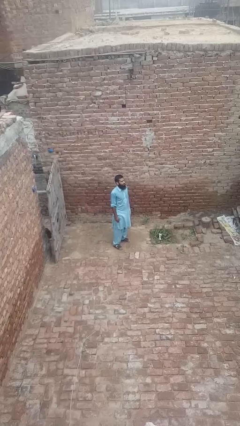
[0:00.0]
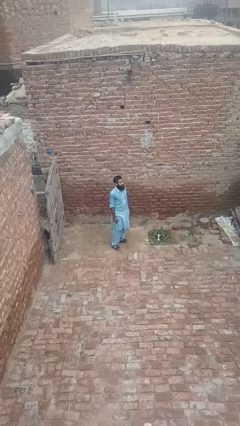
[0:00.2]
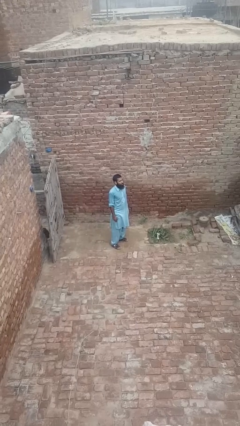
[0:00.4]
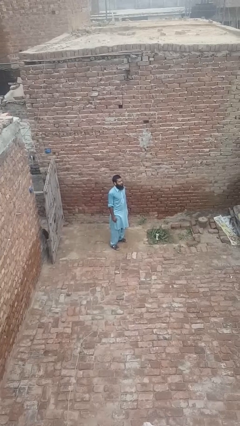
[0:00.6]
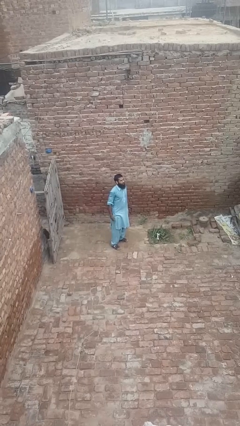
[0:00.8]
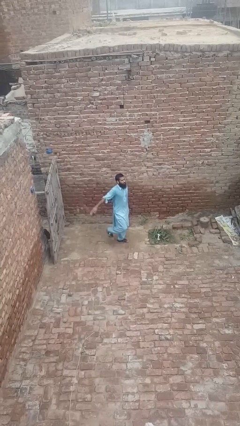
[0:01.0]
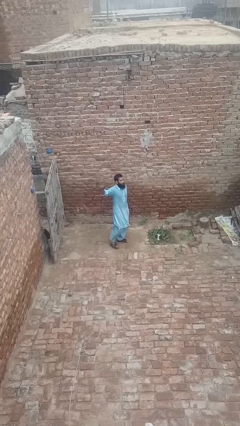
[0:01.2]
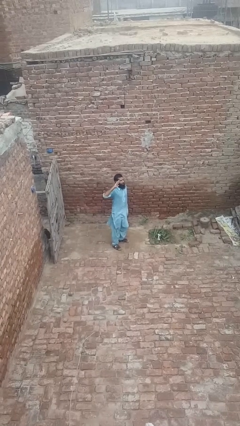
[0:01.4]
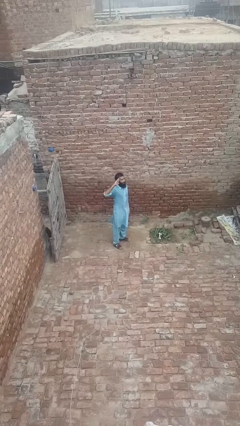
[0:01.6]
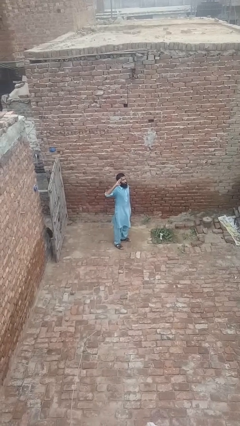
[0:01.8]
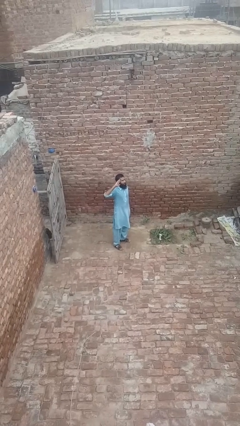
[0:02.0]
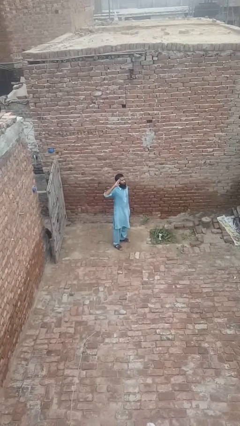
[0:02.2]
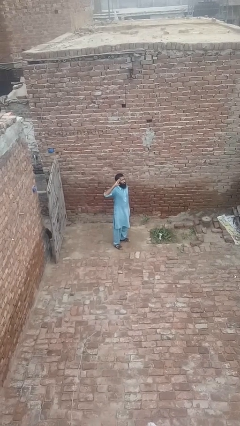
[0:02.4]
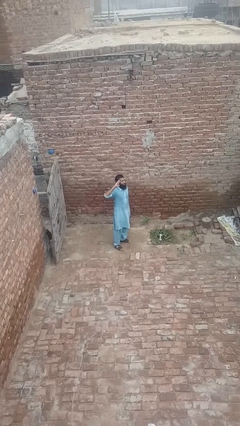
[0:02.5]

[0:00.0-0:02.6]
person salutes

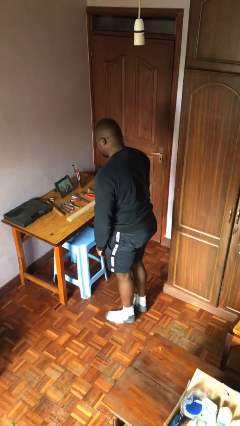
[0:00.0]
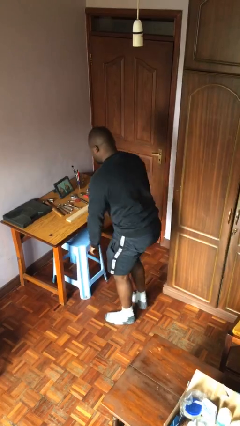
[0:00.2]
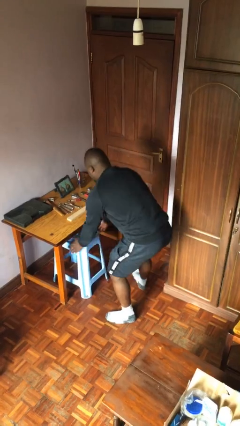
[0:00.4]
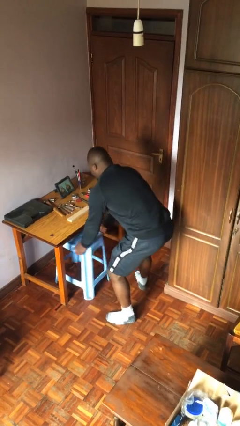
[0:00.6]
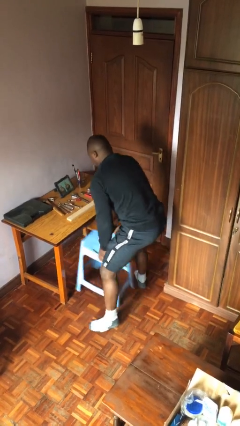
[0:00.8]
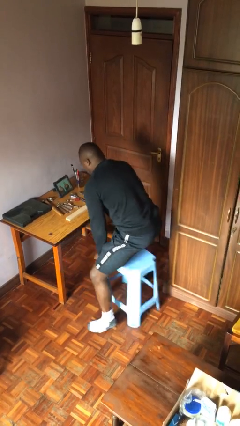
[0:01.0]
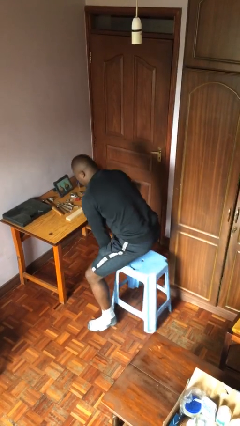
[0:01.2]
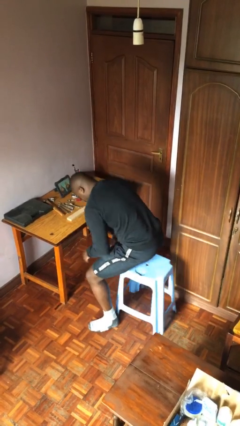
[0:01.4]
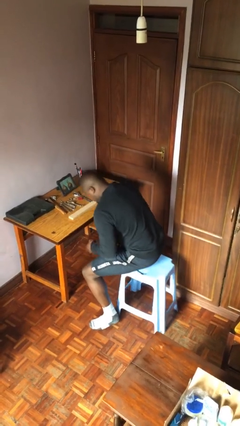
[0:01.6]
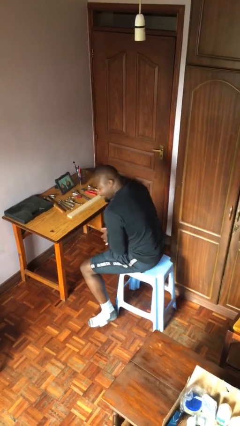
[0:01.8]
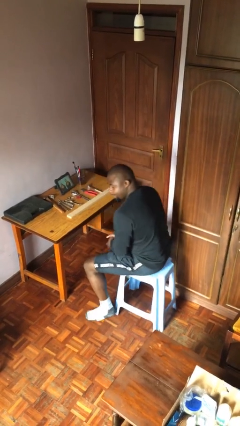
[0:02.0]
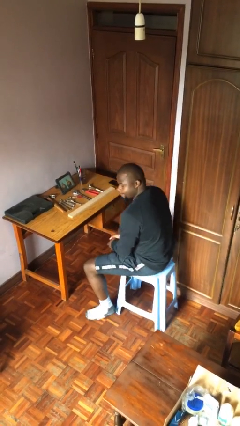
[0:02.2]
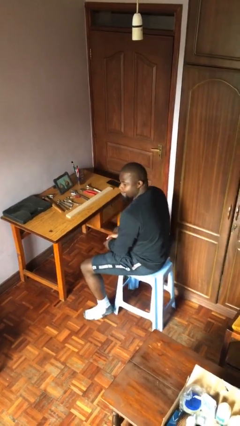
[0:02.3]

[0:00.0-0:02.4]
person sits down

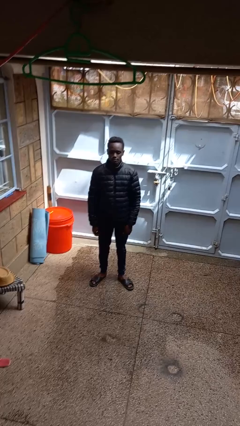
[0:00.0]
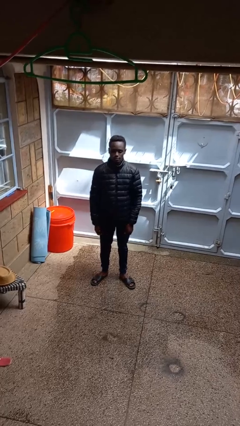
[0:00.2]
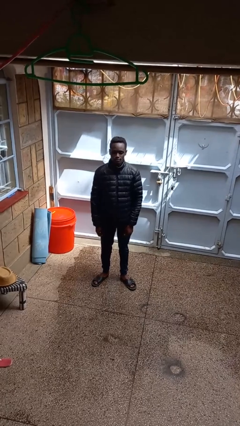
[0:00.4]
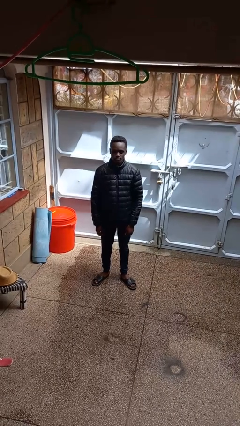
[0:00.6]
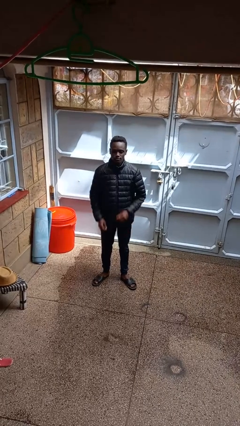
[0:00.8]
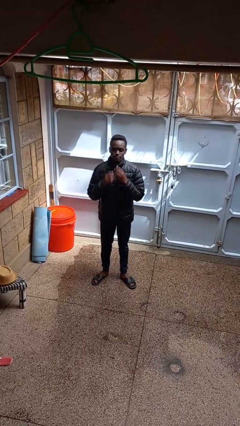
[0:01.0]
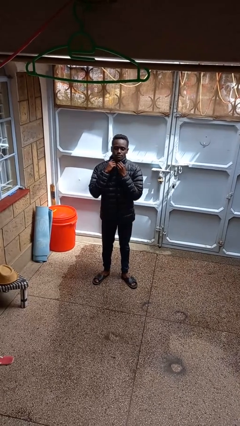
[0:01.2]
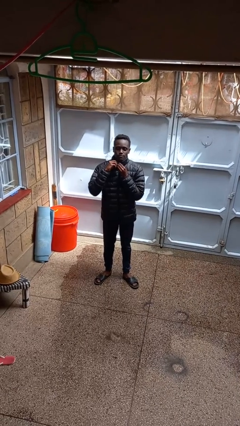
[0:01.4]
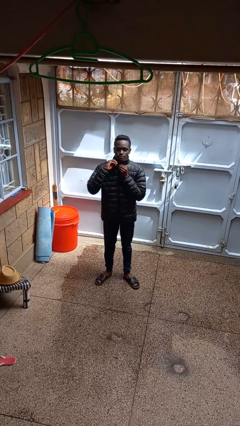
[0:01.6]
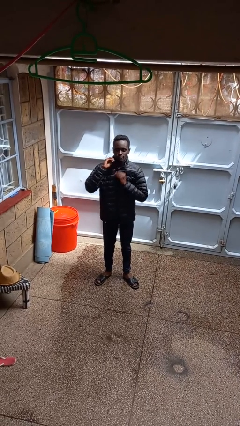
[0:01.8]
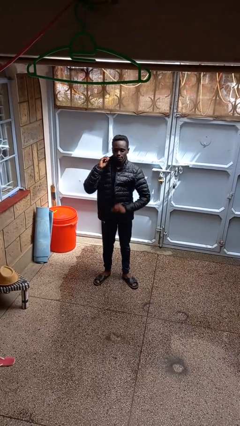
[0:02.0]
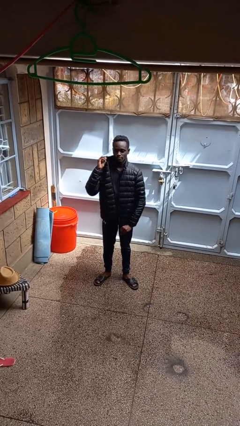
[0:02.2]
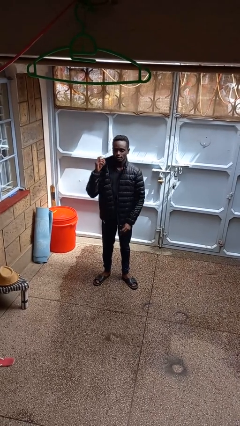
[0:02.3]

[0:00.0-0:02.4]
person unzips jacket

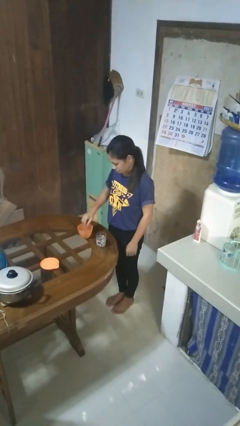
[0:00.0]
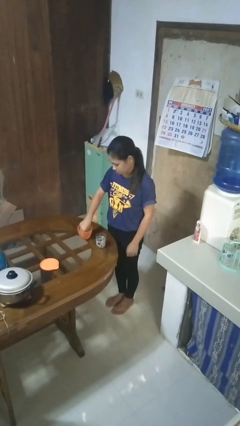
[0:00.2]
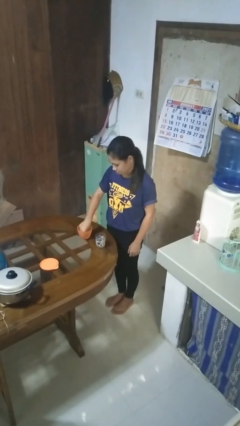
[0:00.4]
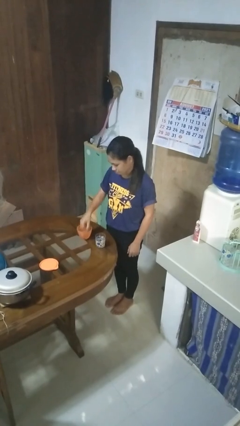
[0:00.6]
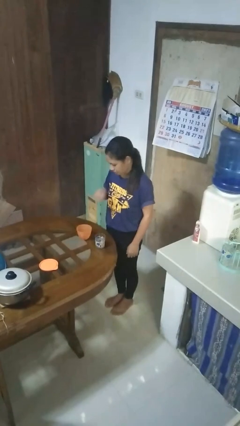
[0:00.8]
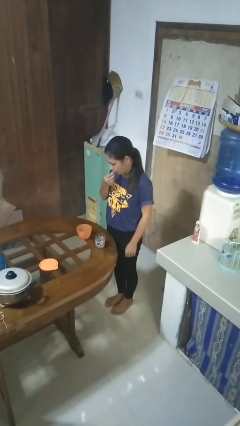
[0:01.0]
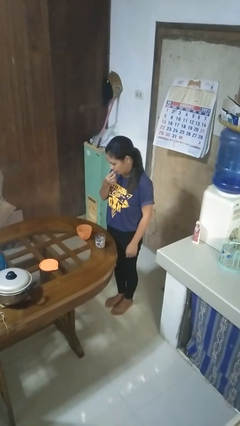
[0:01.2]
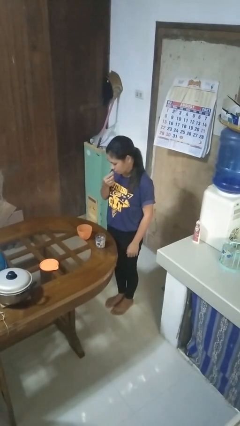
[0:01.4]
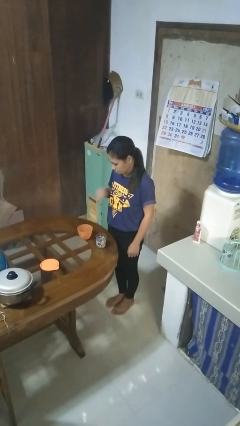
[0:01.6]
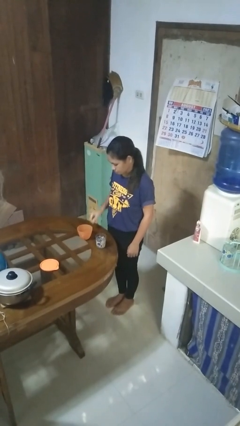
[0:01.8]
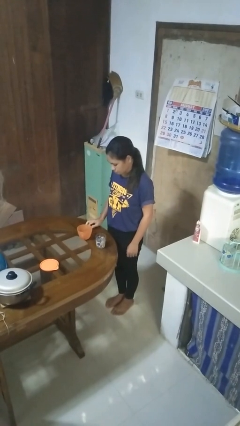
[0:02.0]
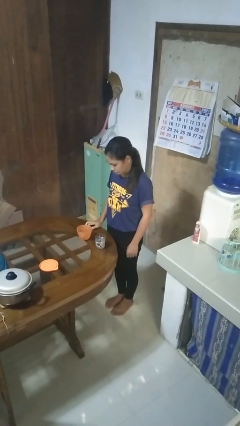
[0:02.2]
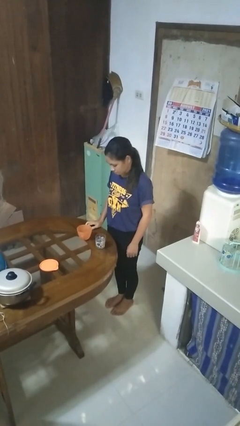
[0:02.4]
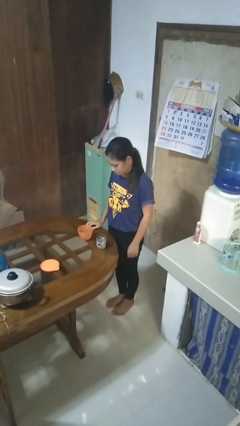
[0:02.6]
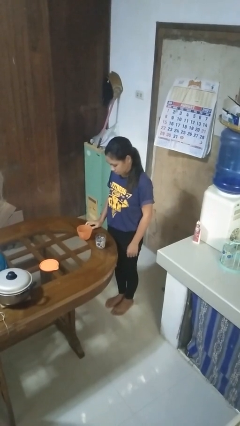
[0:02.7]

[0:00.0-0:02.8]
person takes medicine pills

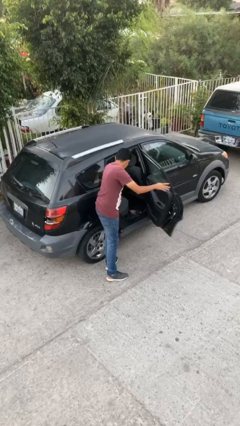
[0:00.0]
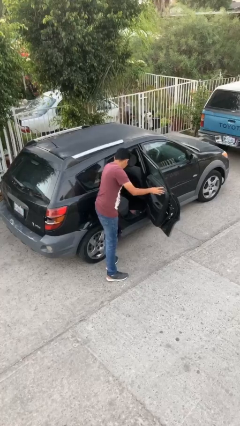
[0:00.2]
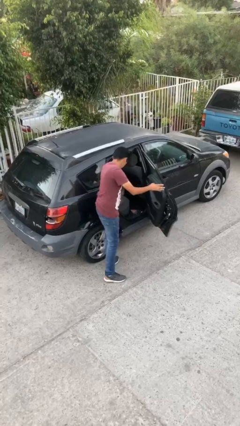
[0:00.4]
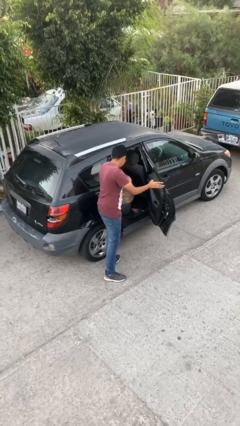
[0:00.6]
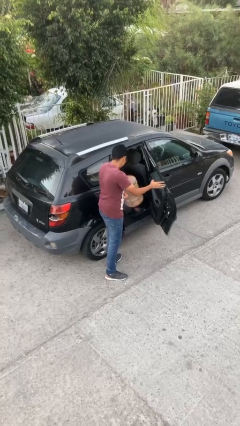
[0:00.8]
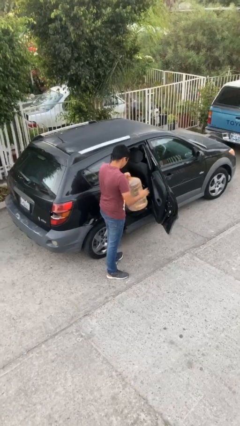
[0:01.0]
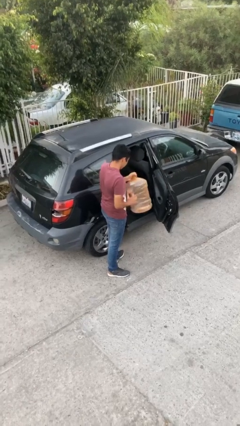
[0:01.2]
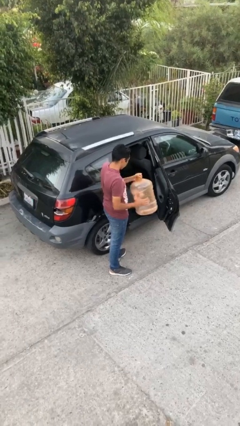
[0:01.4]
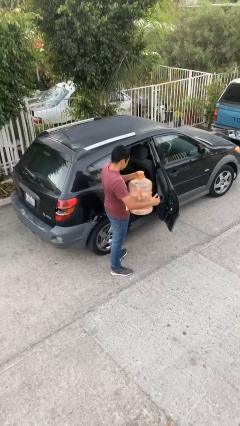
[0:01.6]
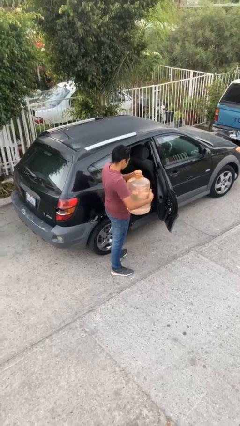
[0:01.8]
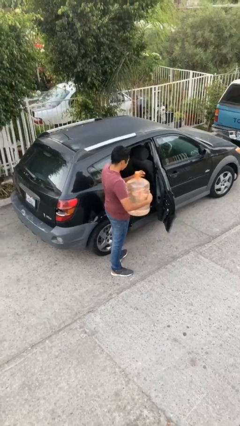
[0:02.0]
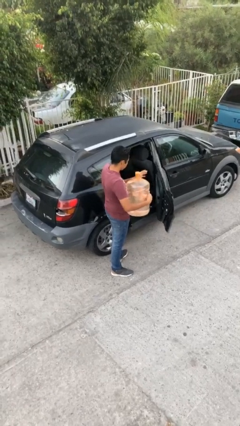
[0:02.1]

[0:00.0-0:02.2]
person unloads car

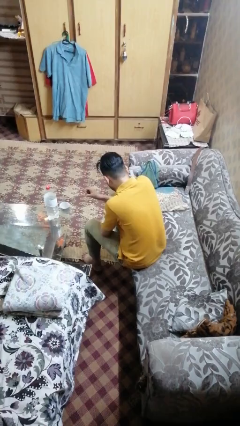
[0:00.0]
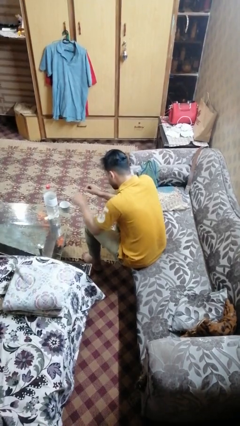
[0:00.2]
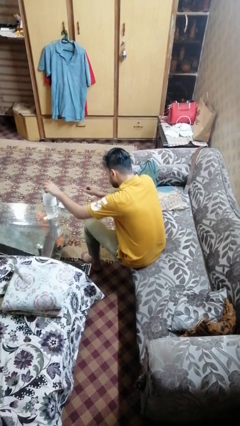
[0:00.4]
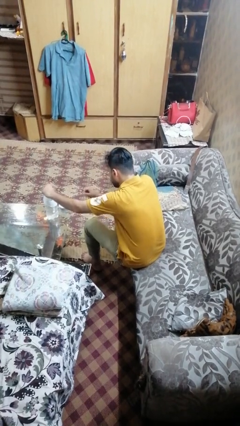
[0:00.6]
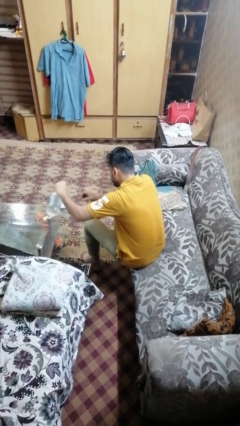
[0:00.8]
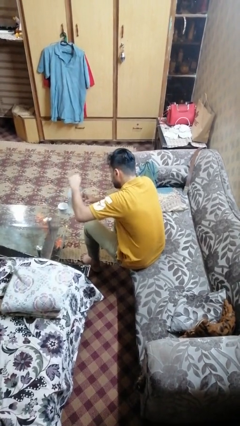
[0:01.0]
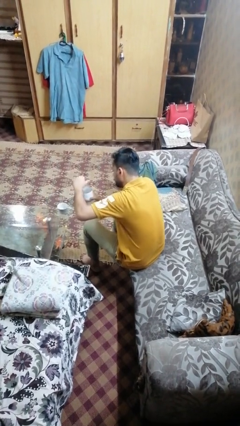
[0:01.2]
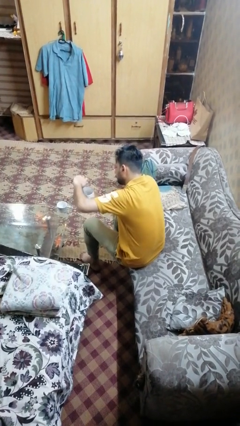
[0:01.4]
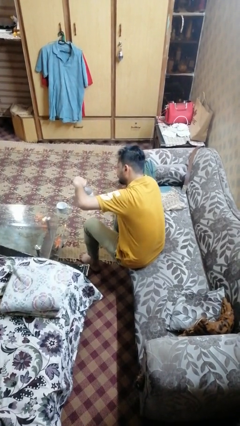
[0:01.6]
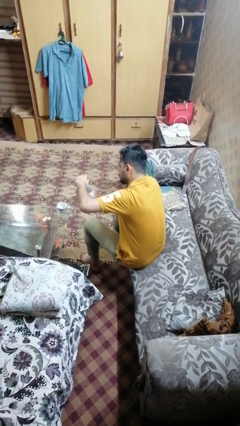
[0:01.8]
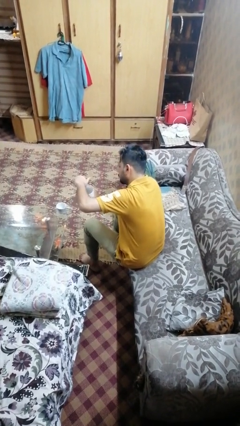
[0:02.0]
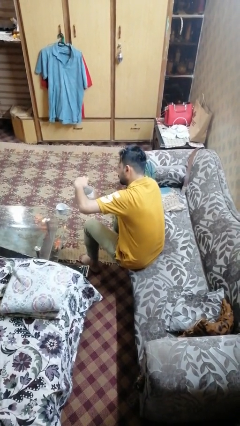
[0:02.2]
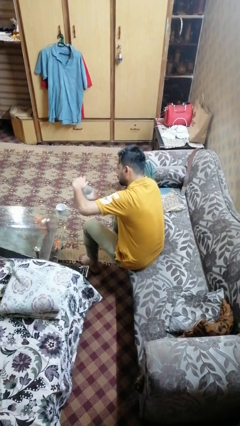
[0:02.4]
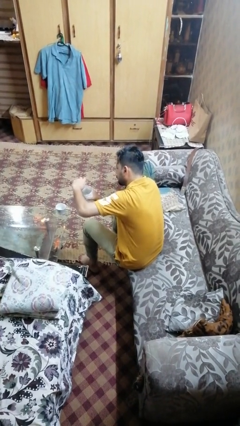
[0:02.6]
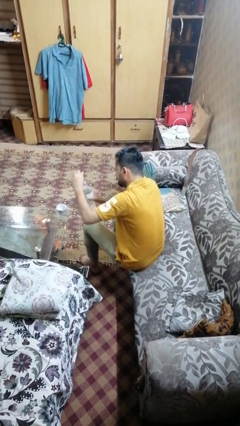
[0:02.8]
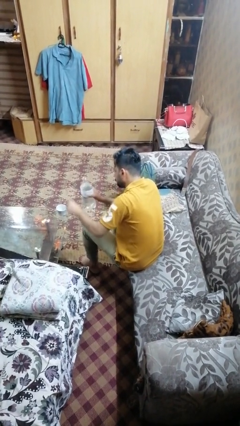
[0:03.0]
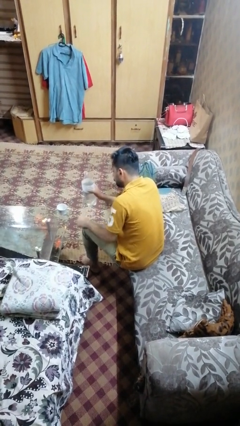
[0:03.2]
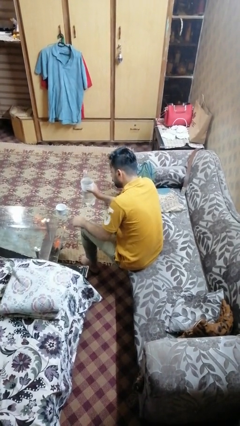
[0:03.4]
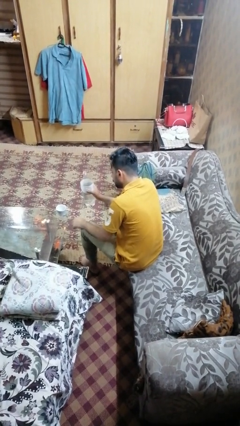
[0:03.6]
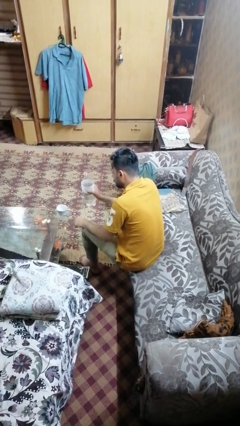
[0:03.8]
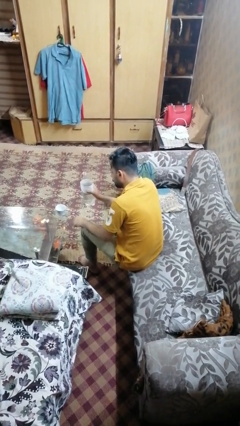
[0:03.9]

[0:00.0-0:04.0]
person unscrews lid from bottle

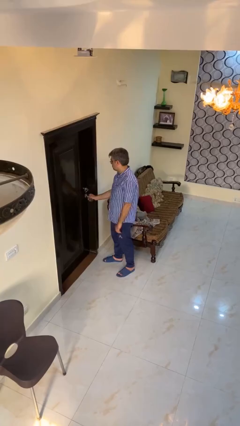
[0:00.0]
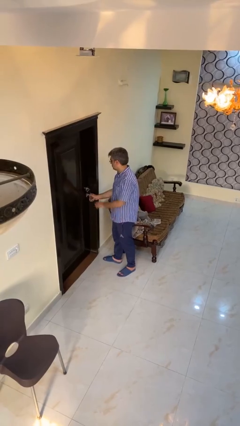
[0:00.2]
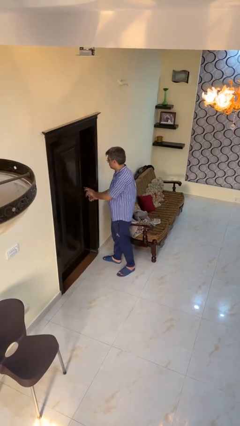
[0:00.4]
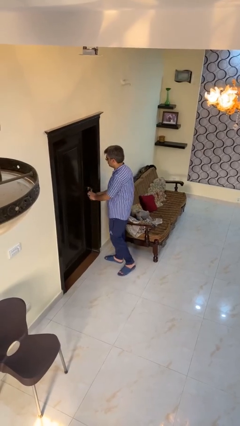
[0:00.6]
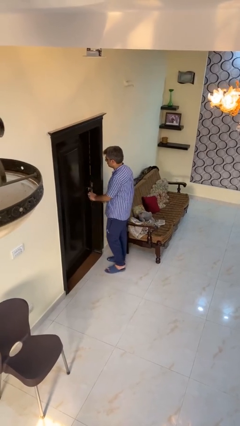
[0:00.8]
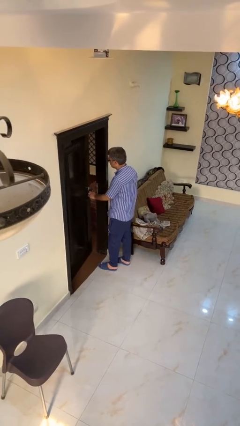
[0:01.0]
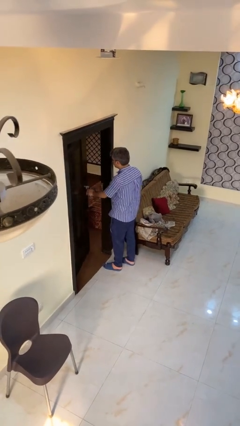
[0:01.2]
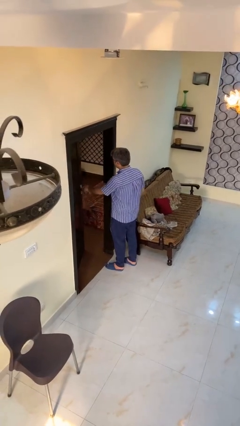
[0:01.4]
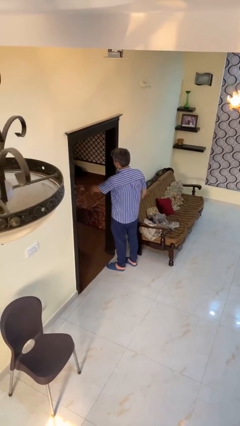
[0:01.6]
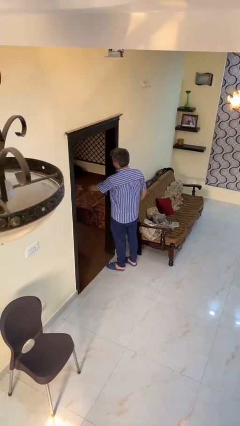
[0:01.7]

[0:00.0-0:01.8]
person opens facility door
